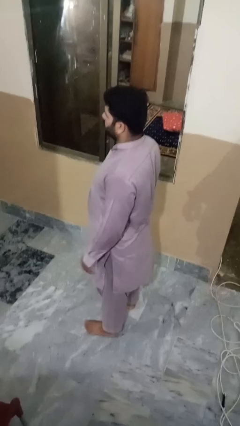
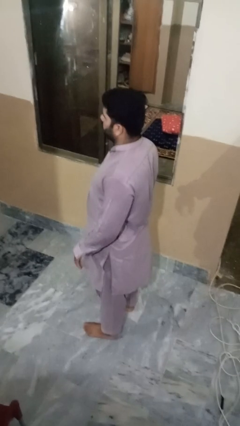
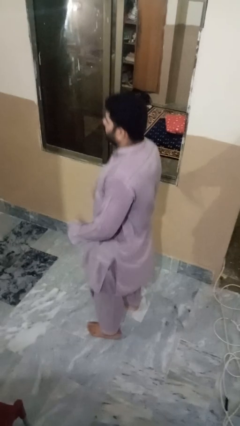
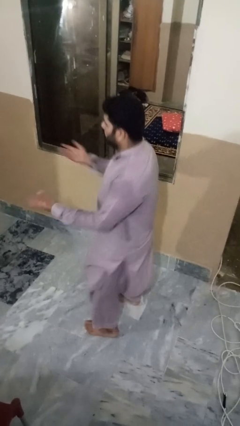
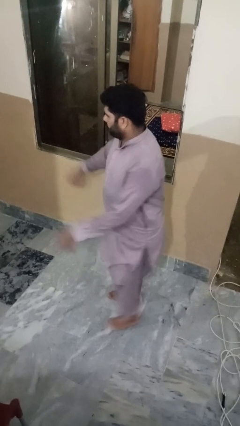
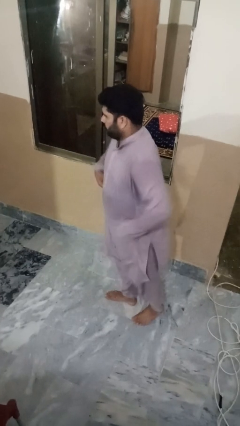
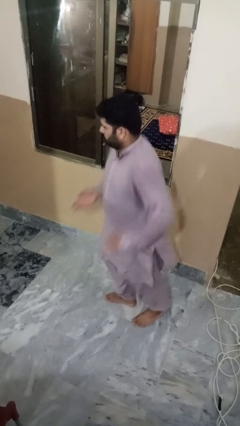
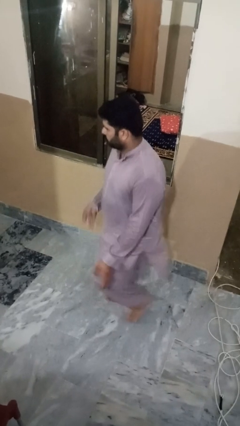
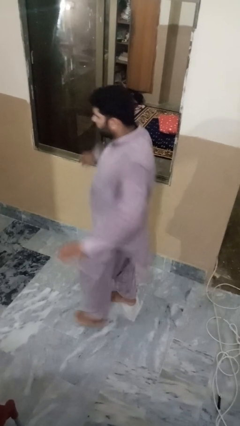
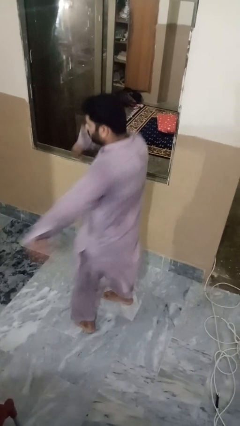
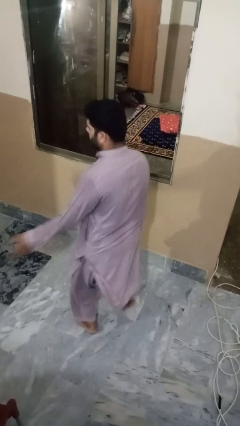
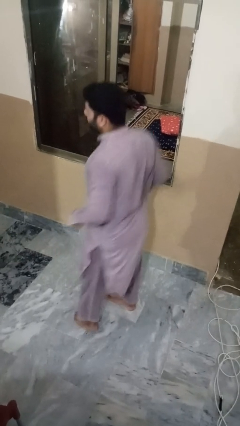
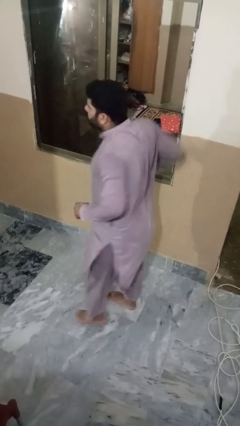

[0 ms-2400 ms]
person dances in place

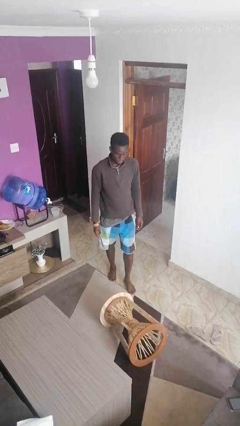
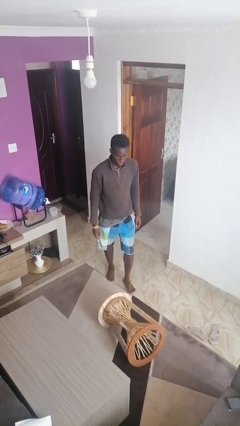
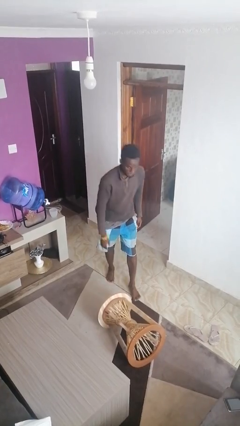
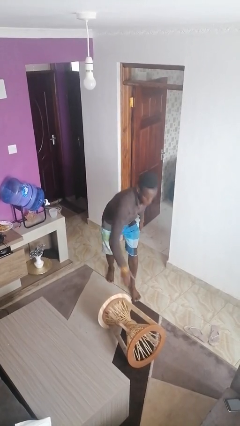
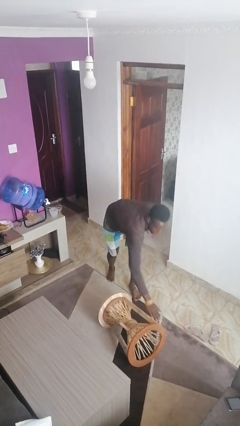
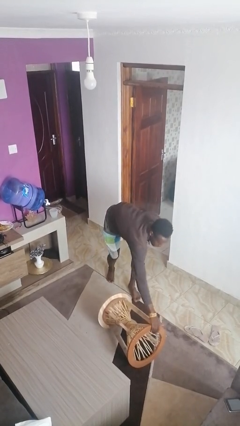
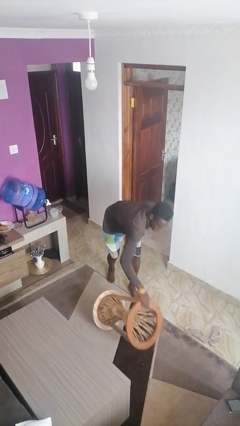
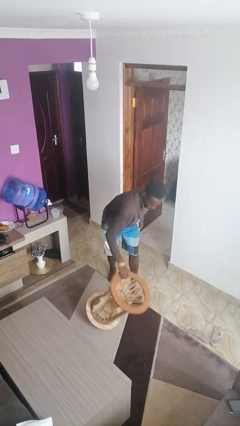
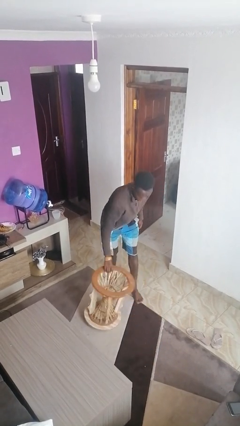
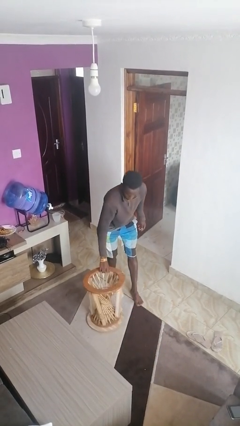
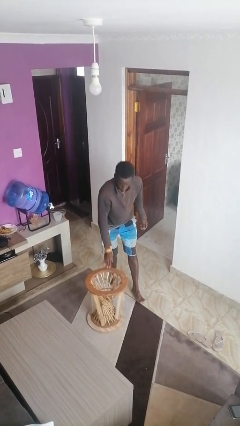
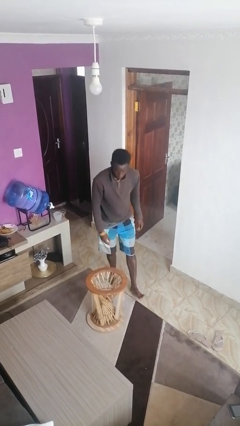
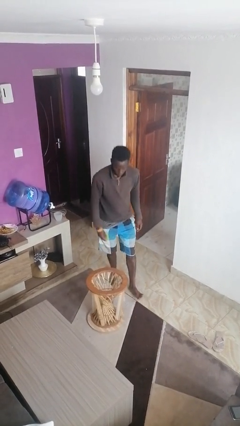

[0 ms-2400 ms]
person sets upright furniture

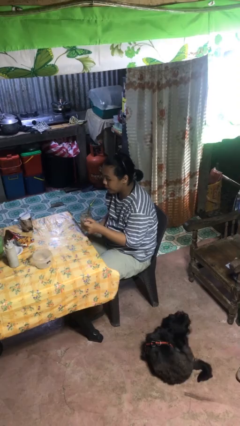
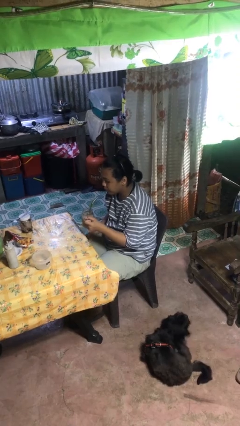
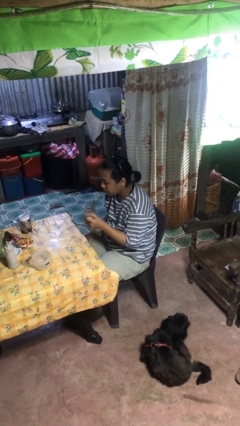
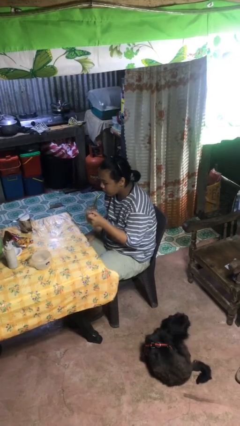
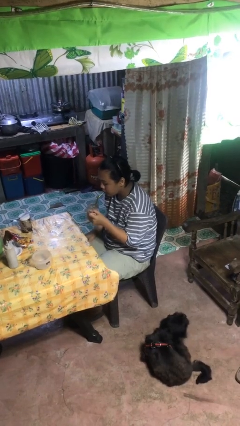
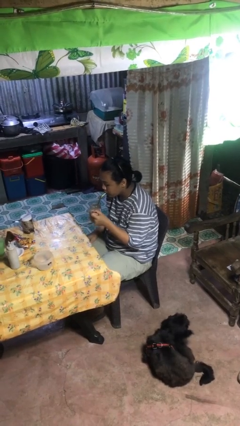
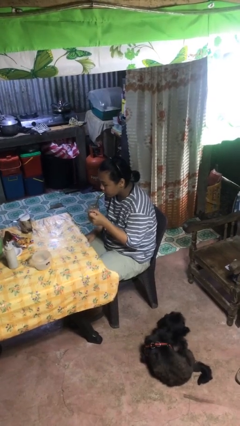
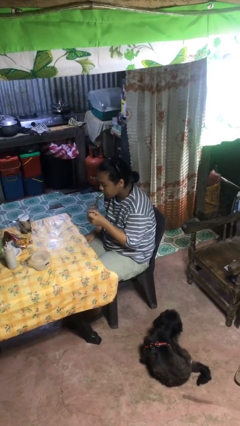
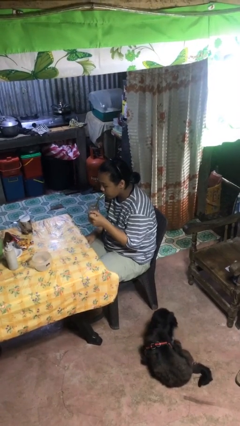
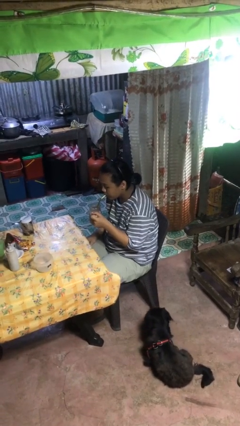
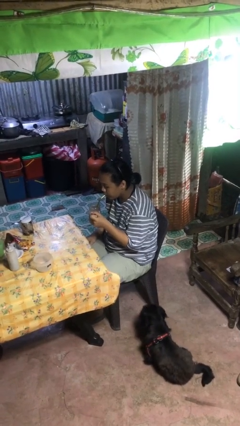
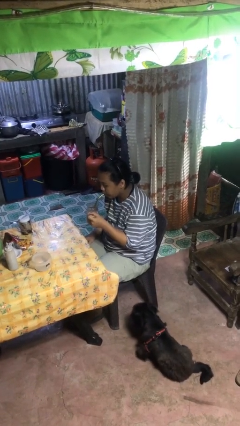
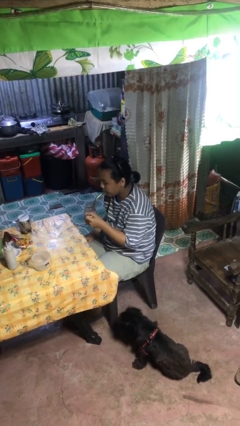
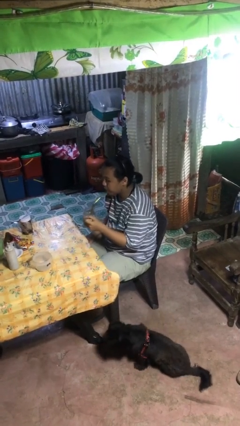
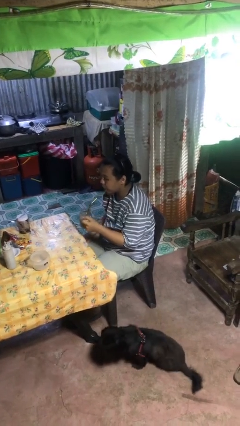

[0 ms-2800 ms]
person drinks from straw

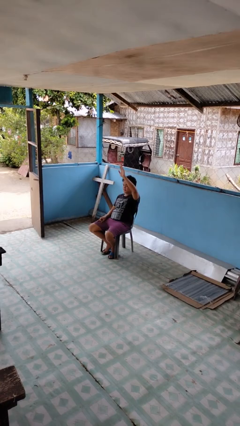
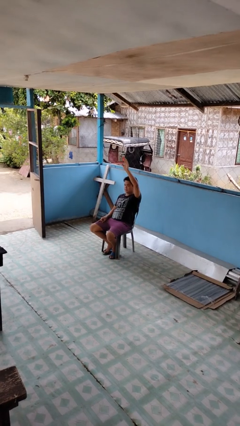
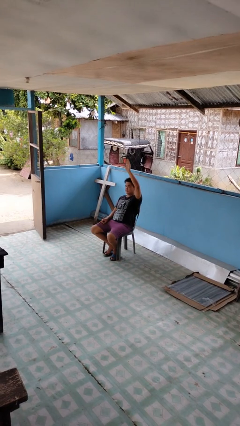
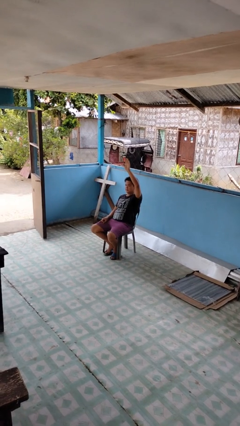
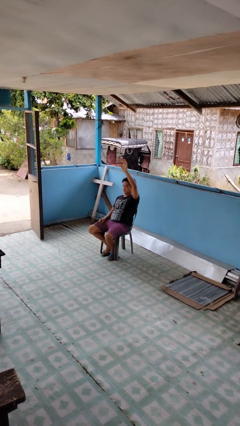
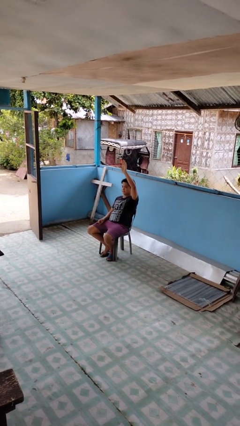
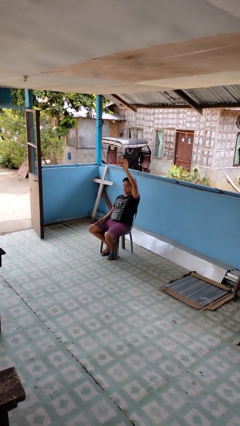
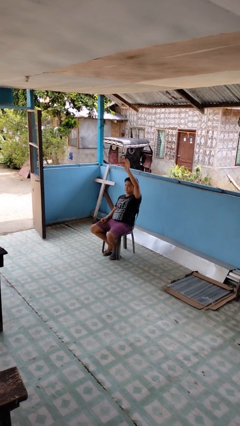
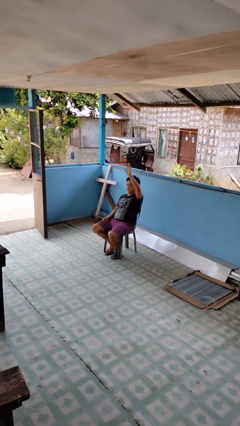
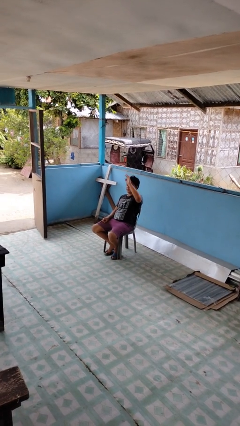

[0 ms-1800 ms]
person gestures raise hand

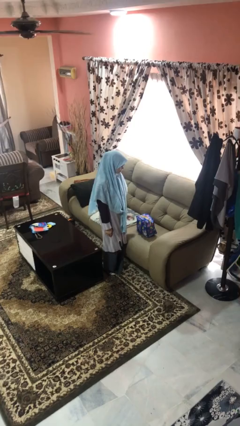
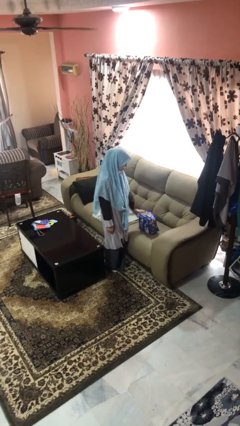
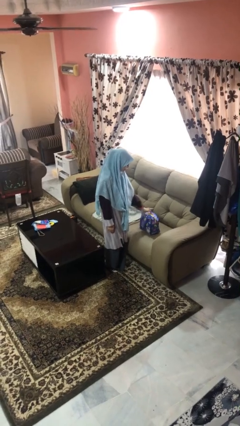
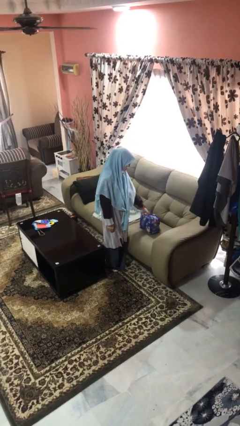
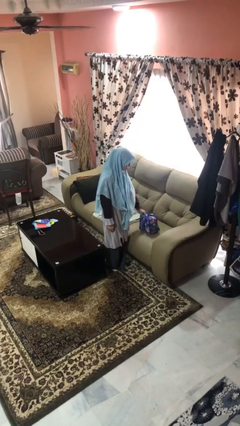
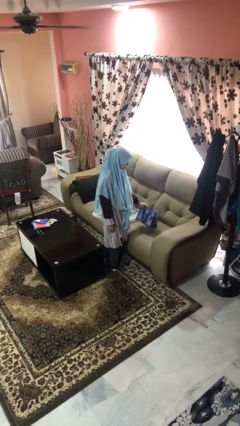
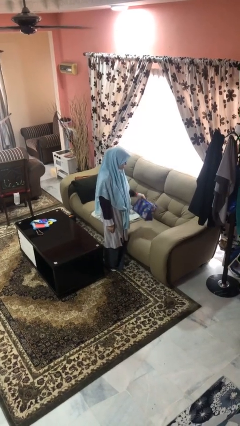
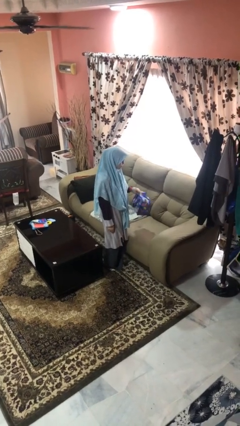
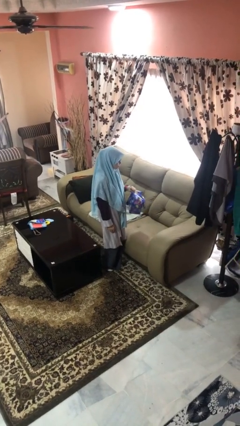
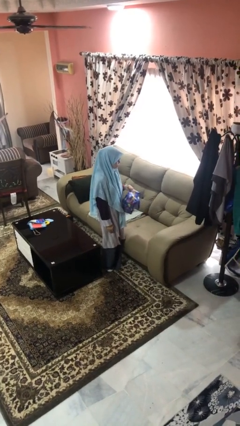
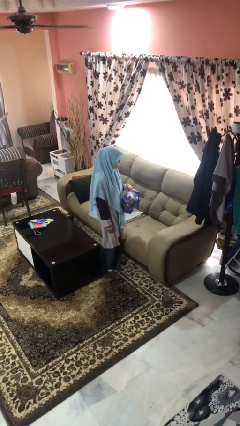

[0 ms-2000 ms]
person picks up object from couch

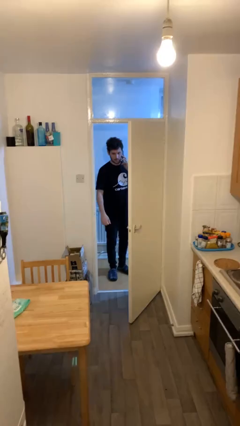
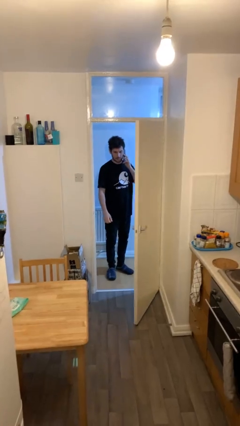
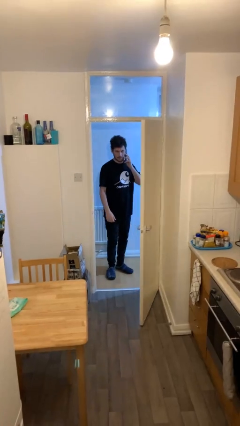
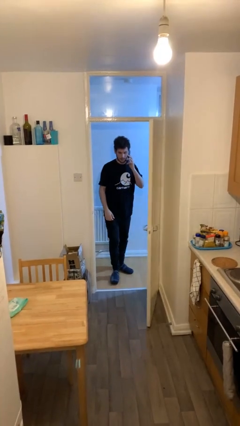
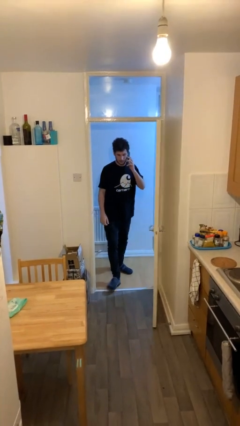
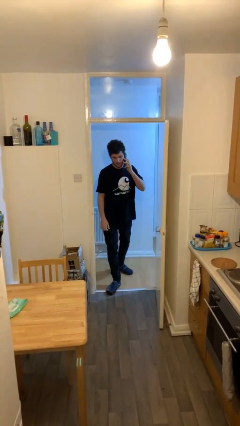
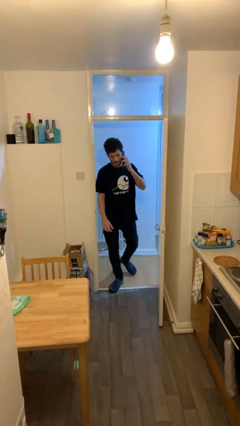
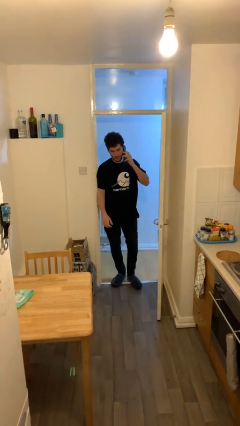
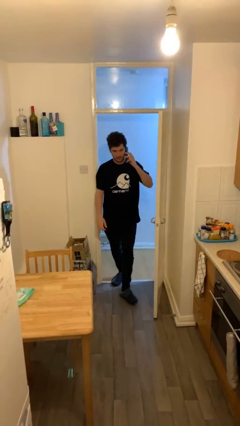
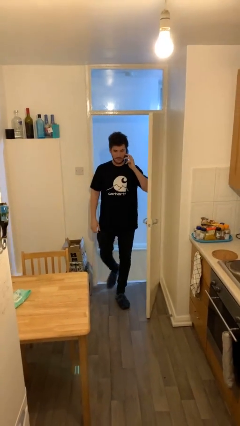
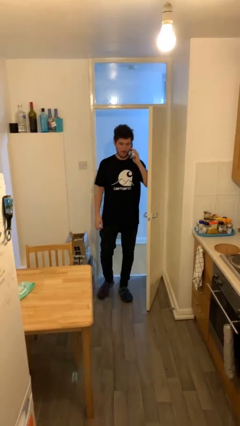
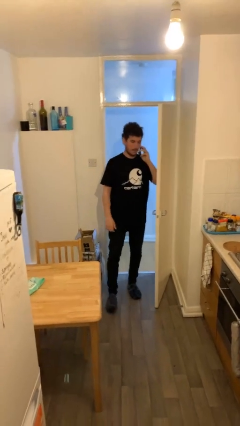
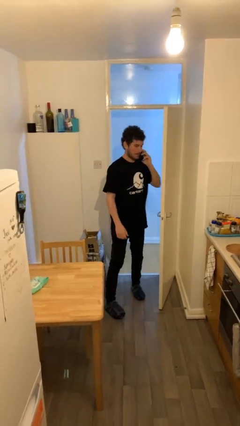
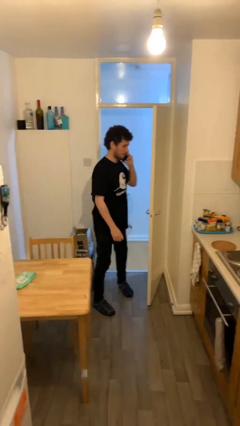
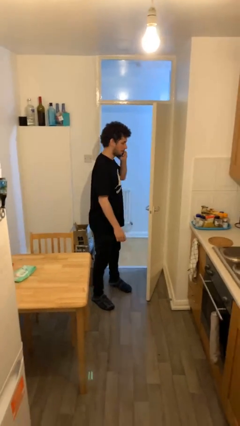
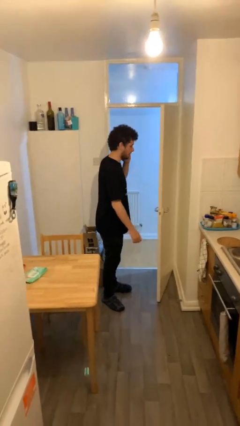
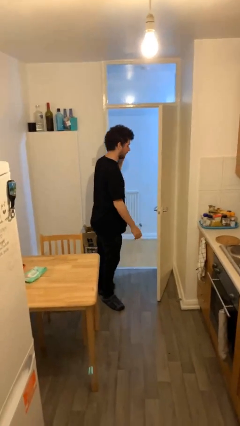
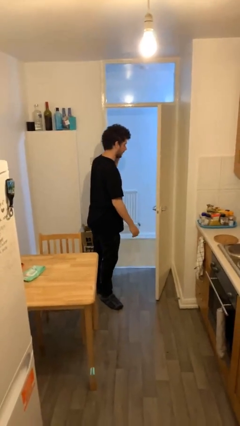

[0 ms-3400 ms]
person enters scene through structure

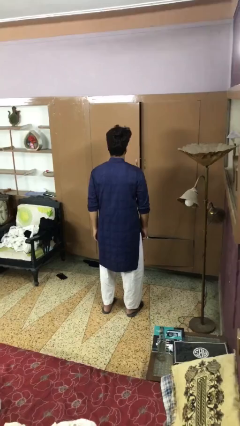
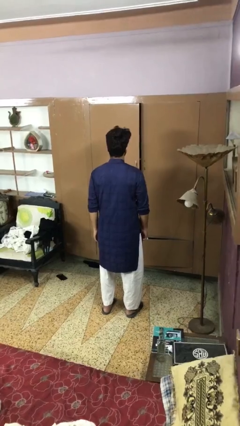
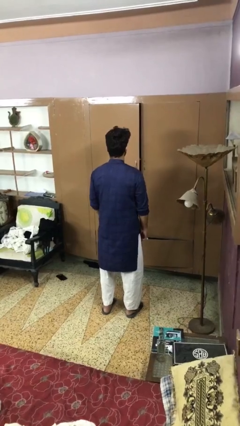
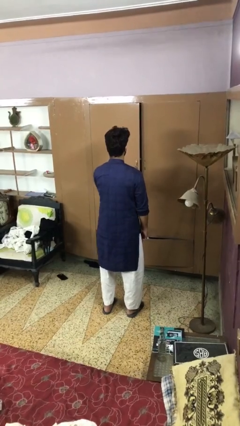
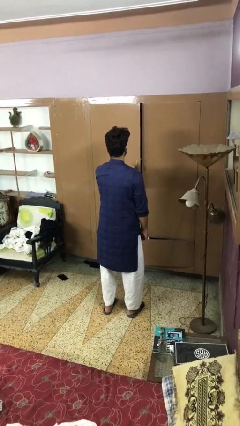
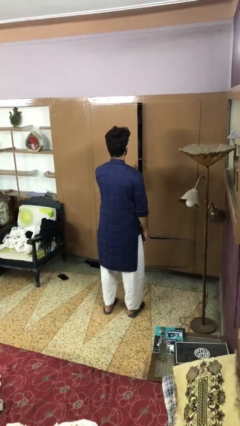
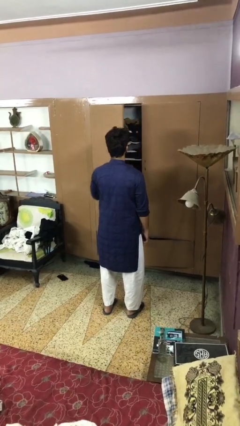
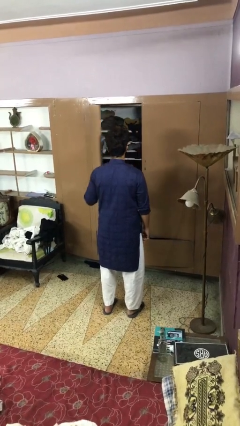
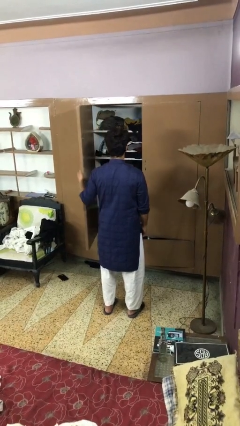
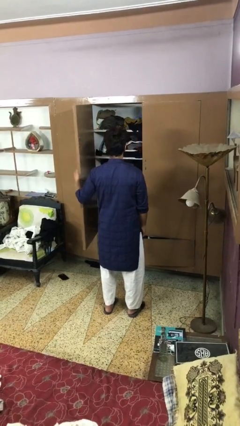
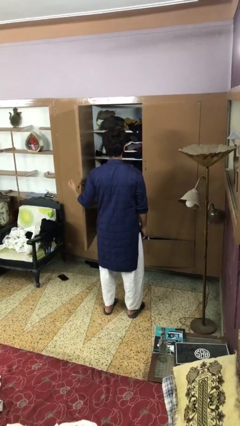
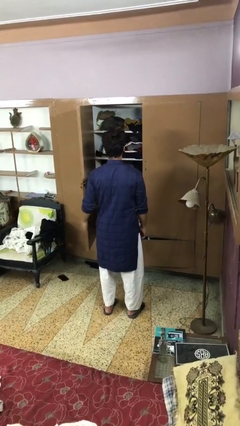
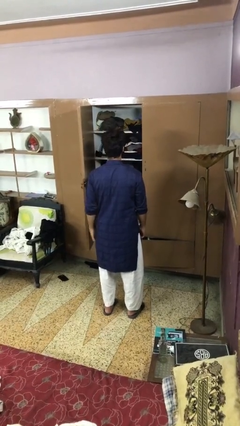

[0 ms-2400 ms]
person opens closet door
